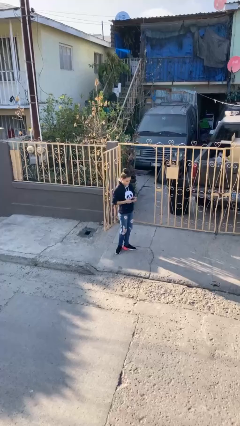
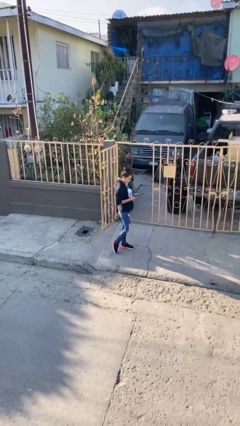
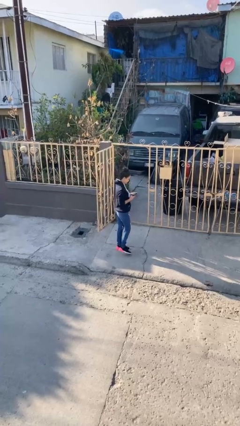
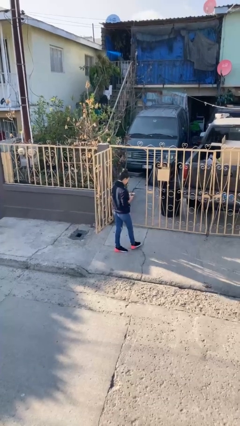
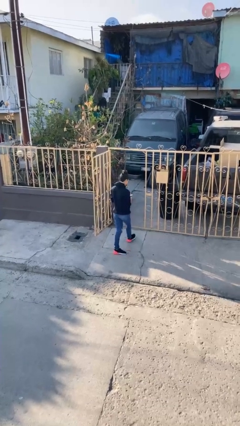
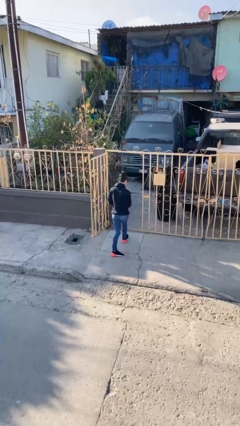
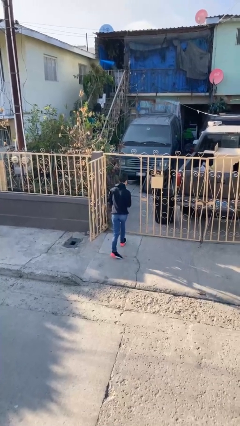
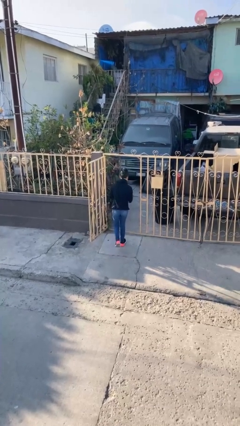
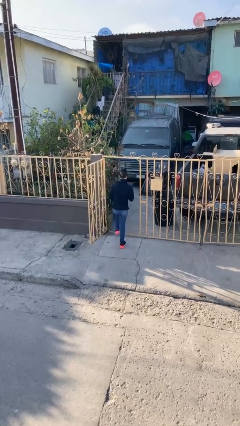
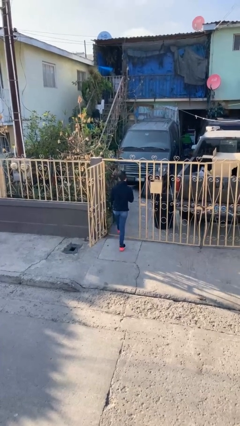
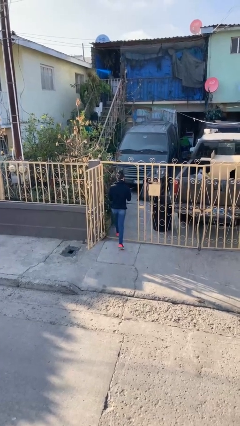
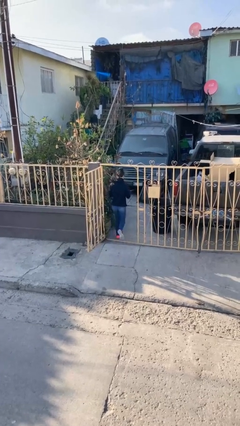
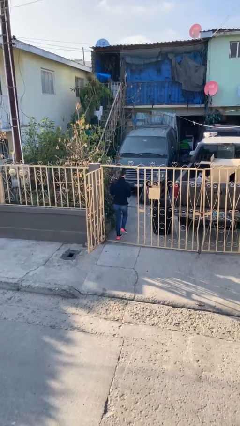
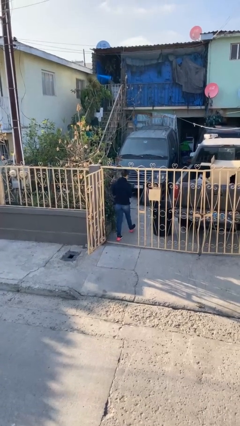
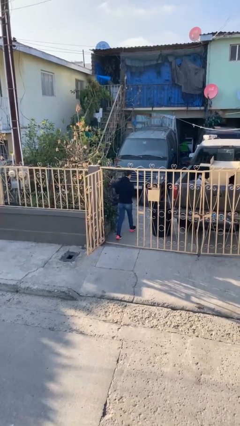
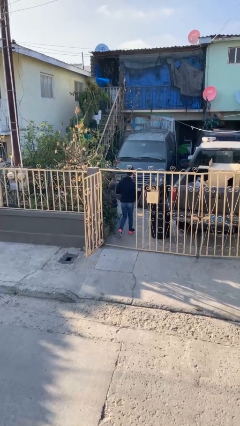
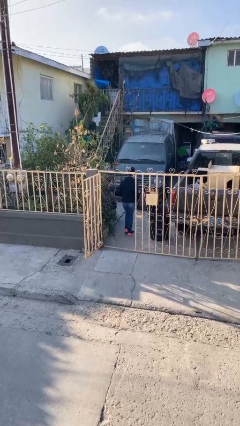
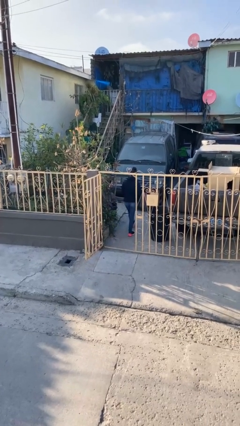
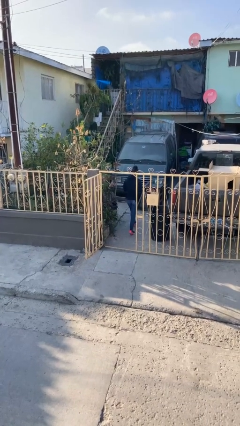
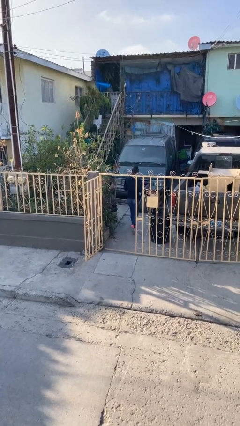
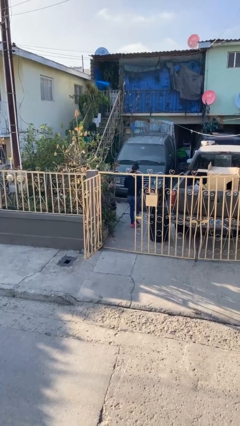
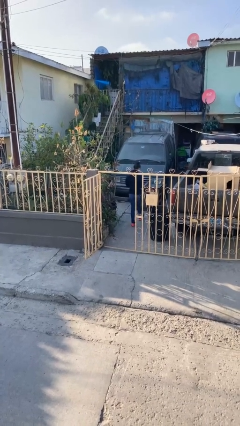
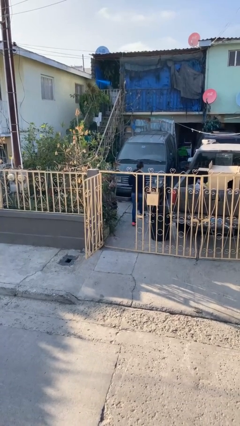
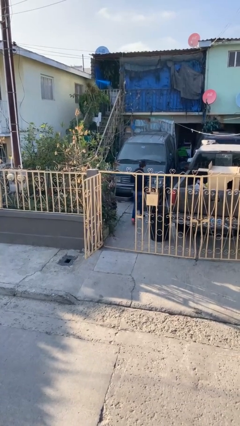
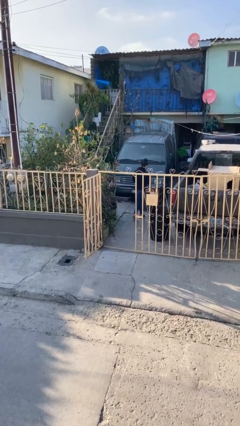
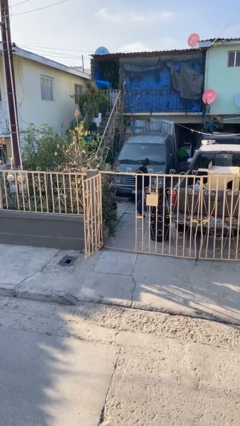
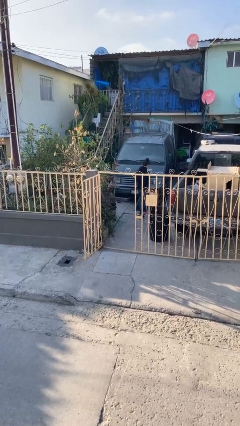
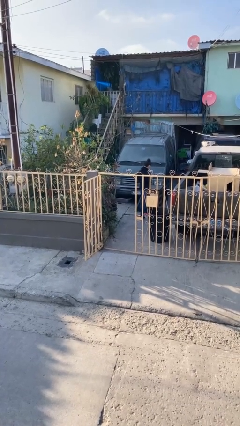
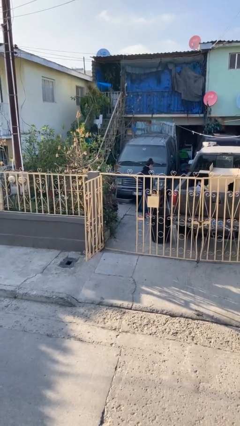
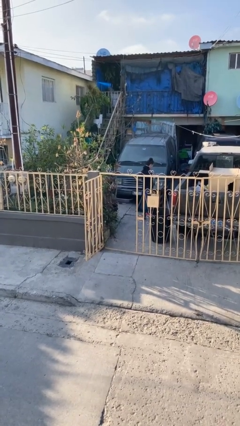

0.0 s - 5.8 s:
person exits scene through structure

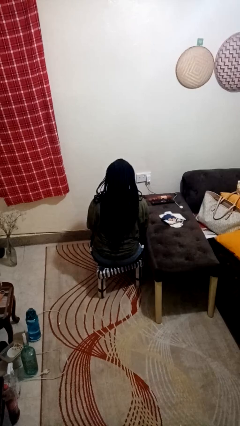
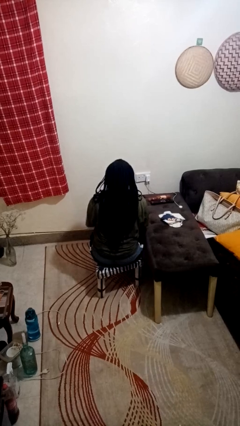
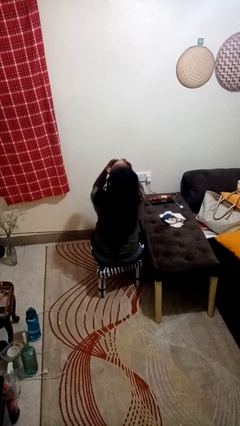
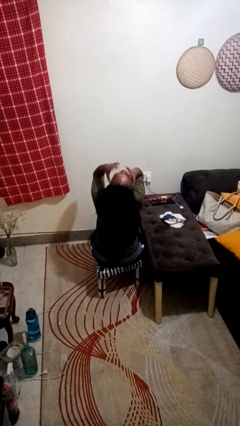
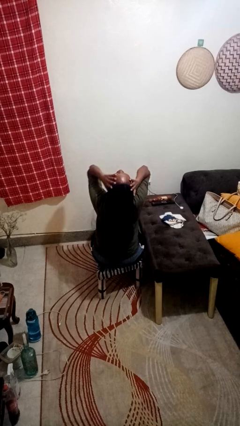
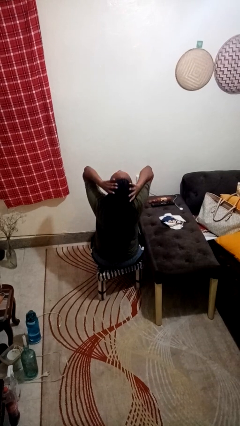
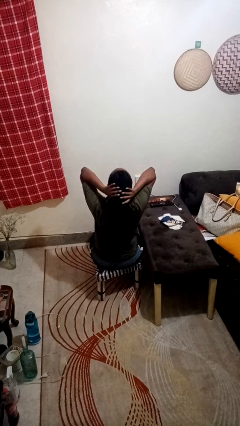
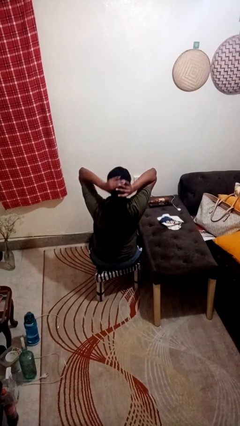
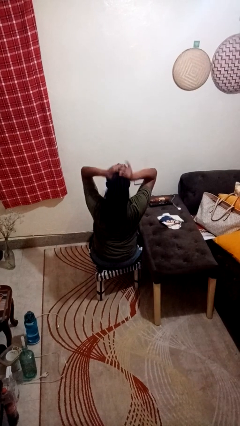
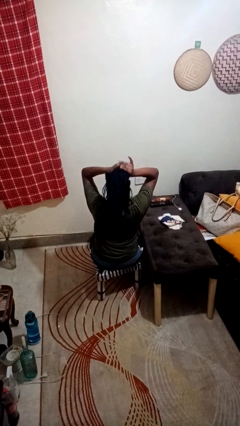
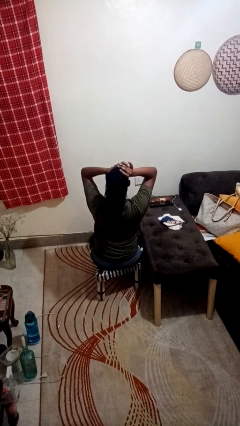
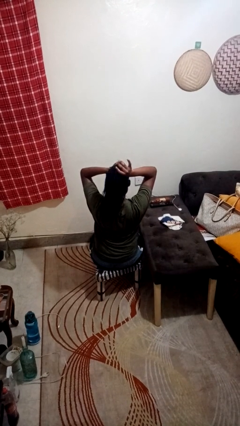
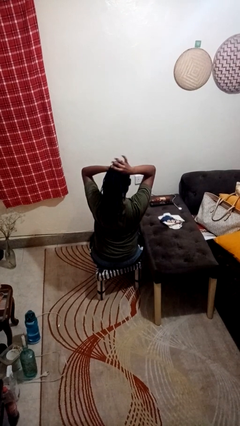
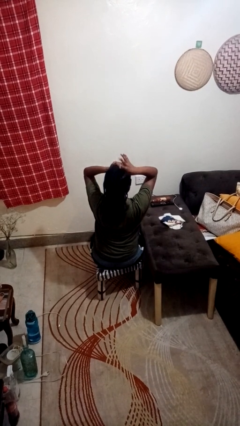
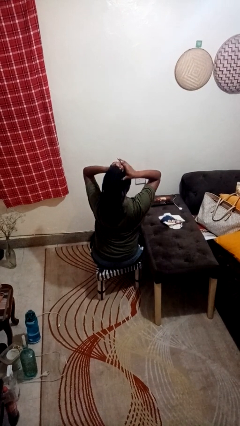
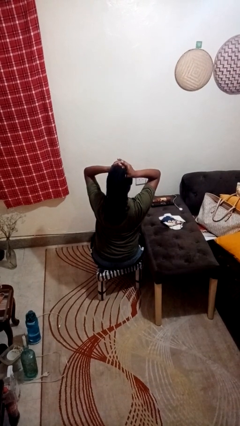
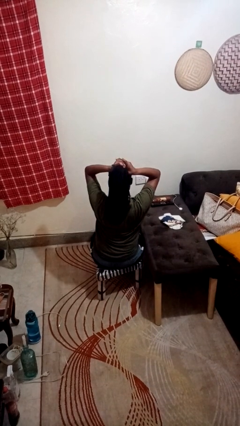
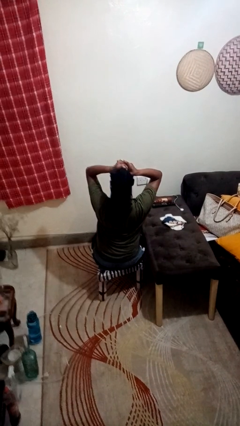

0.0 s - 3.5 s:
person puts hair in ponytail

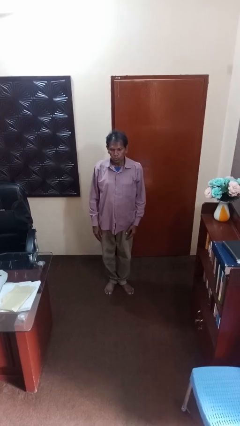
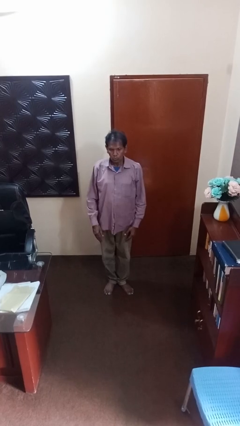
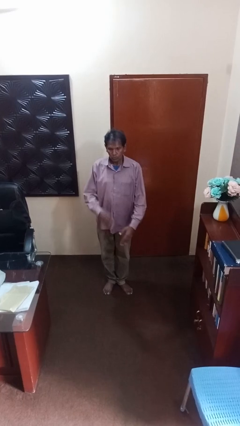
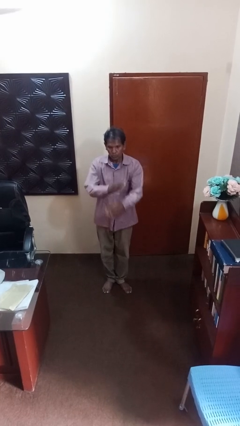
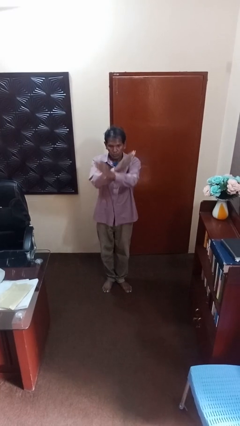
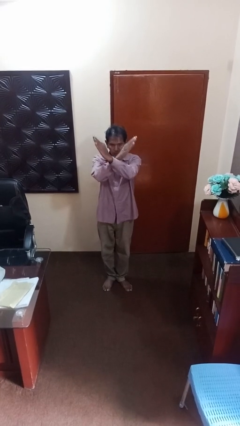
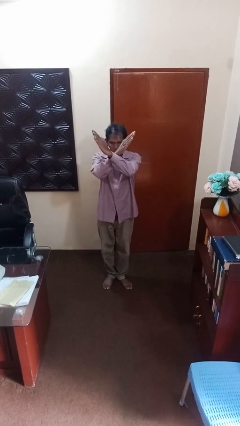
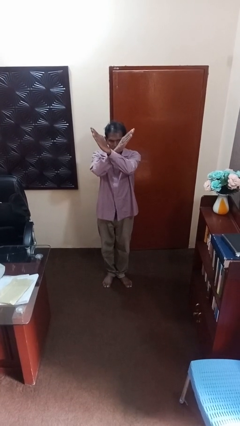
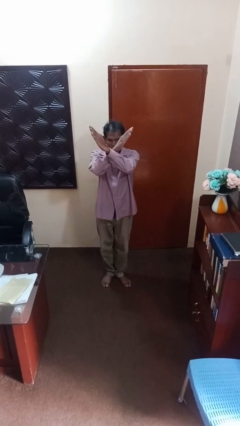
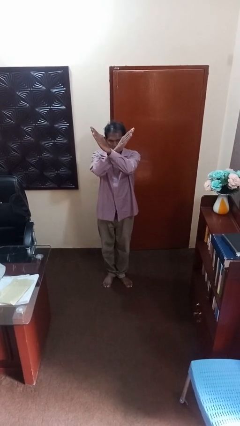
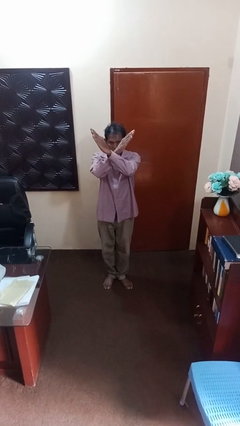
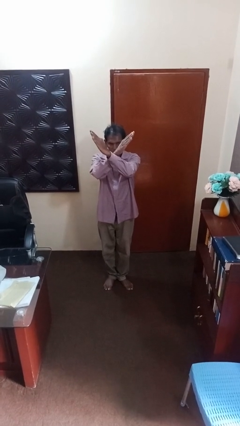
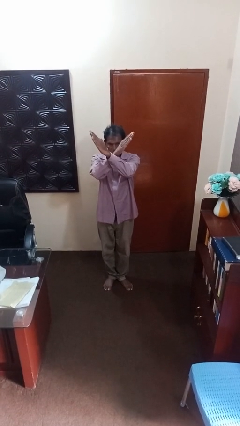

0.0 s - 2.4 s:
person gestures arms x

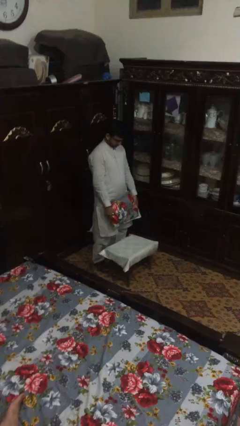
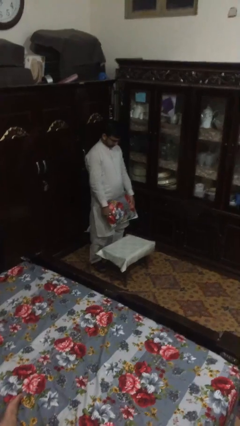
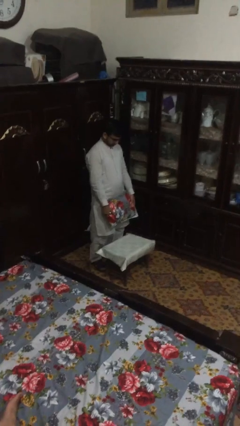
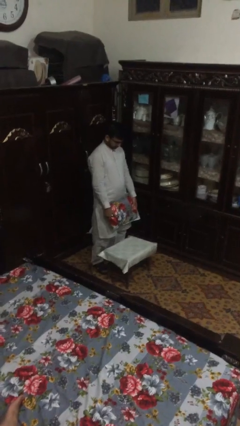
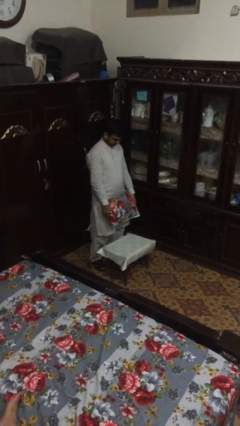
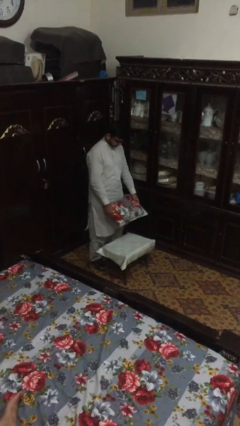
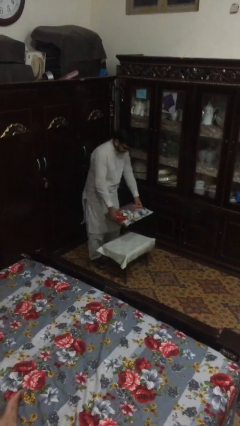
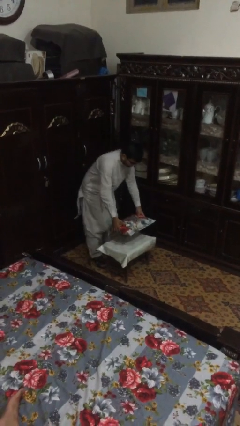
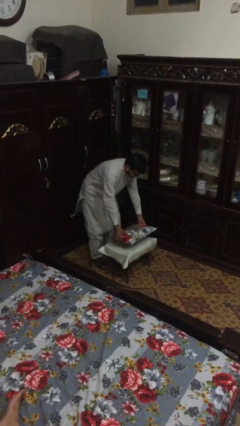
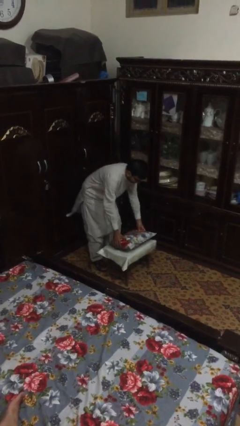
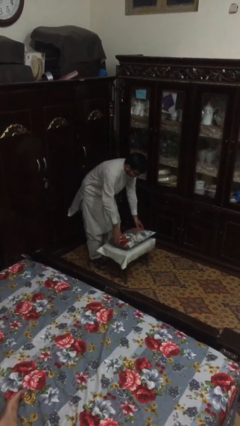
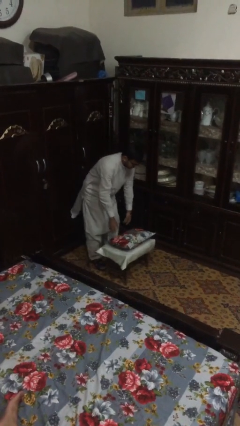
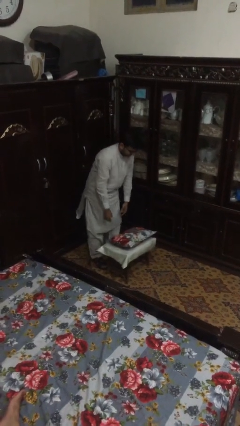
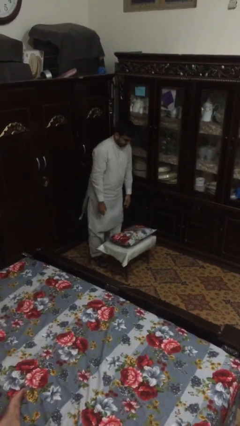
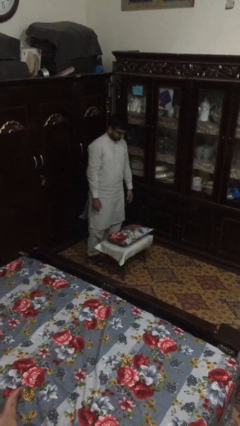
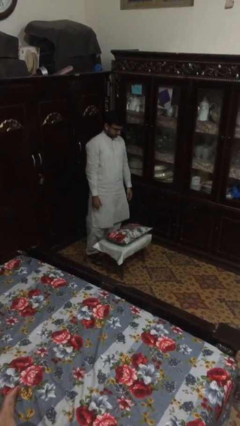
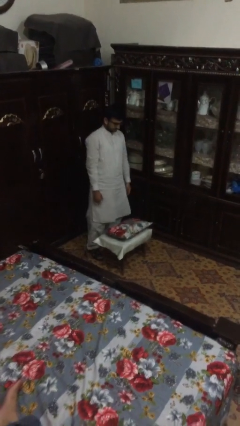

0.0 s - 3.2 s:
person puts down object on table

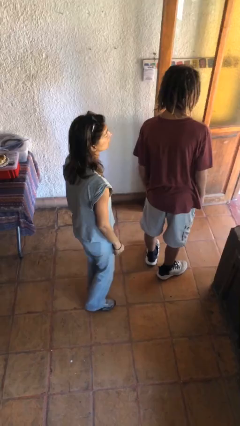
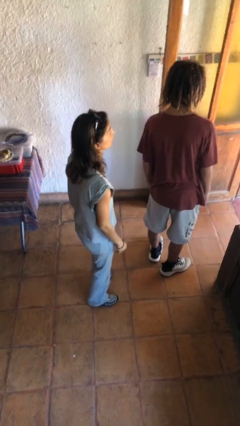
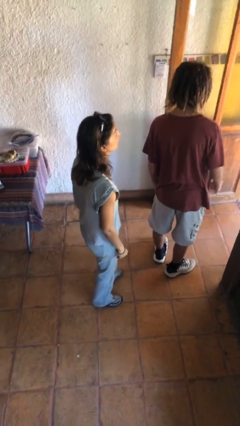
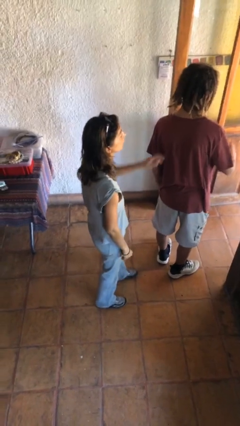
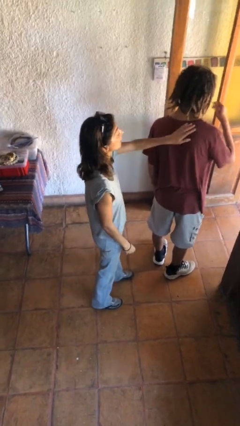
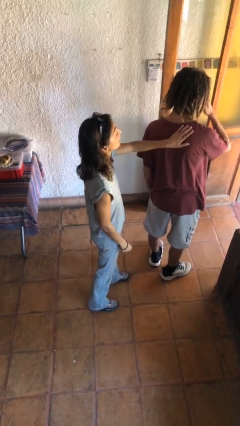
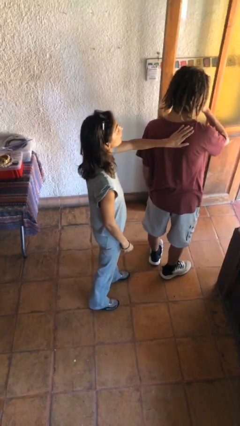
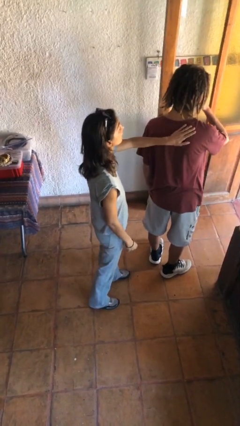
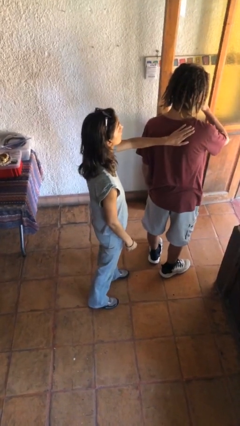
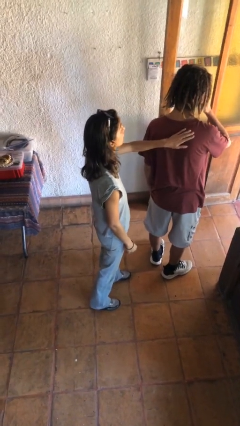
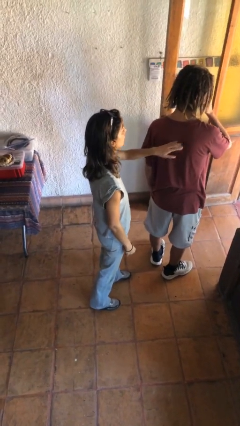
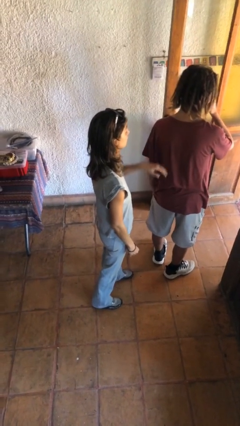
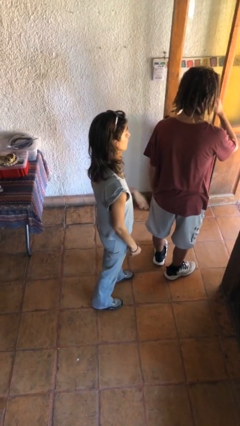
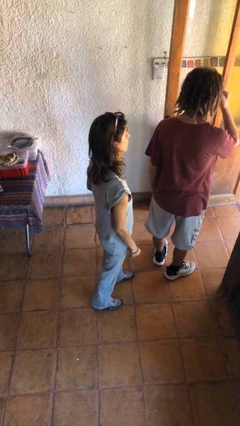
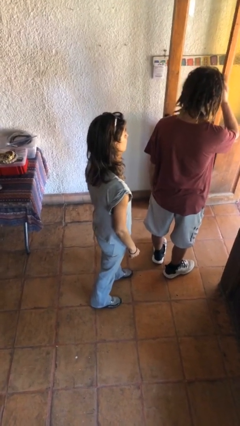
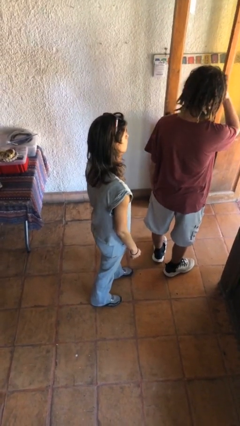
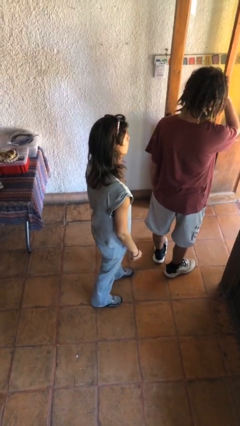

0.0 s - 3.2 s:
person touches back of person
